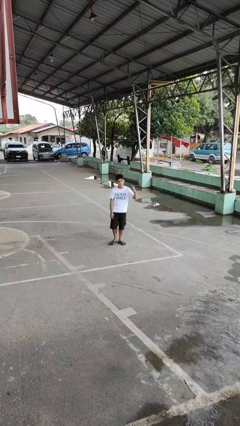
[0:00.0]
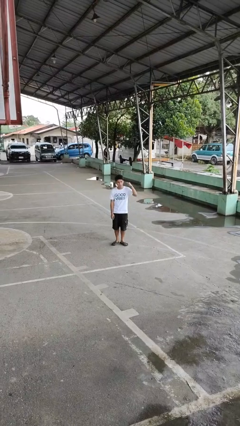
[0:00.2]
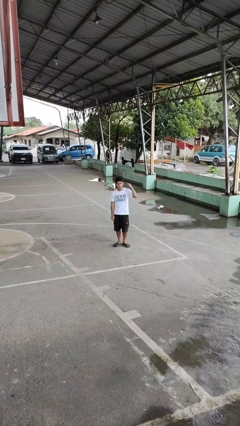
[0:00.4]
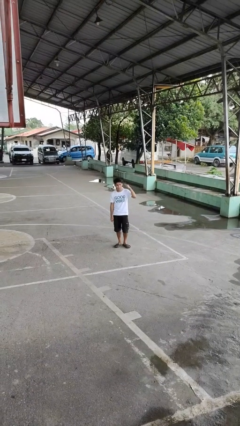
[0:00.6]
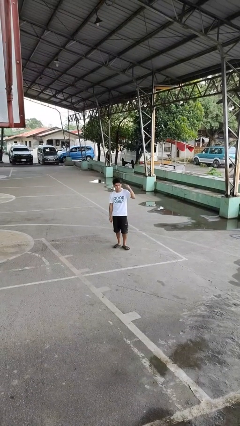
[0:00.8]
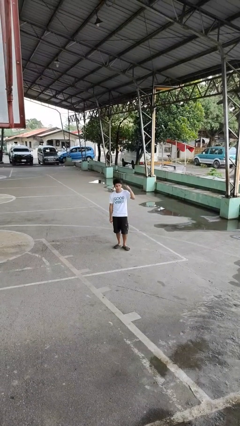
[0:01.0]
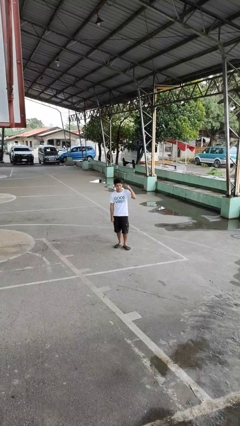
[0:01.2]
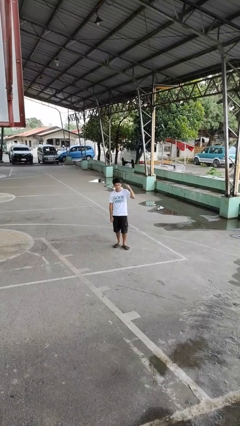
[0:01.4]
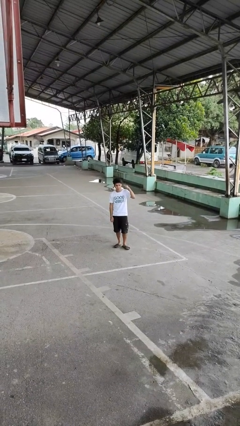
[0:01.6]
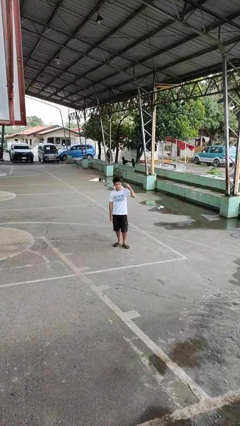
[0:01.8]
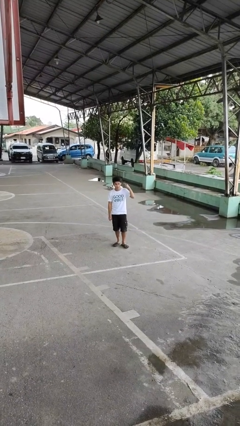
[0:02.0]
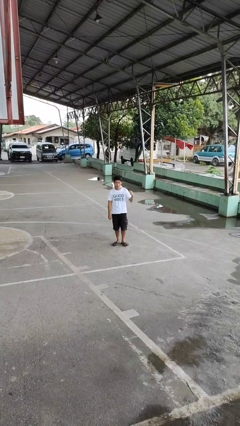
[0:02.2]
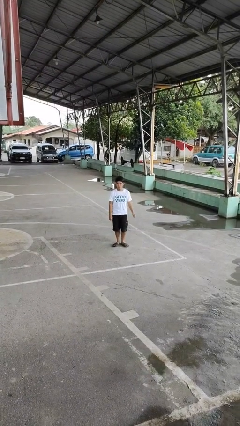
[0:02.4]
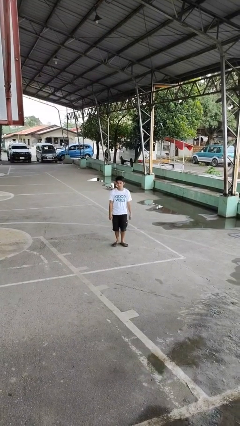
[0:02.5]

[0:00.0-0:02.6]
person gestures listen closely

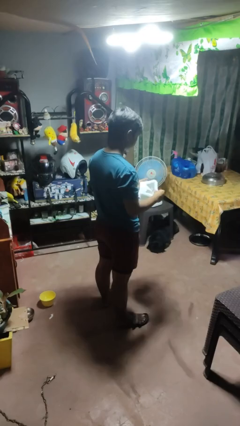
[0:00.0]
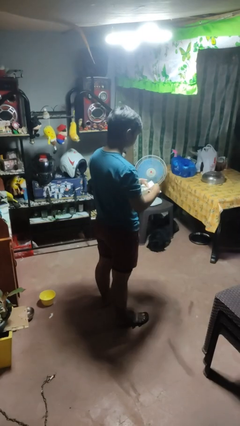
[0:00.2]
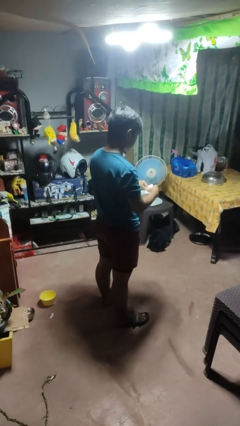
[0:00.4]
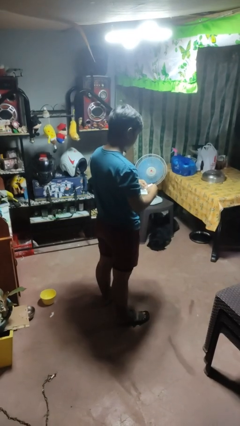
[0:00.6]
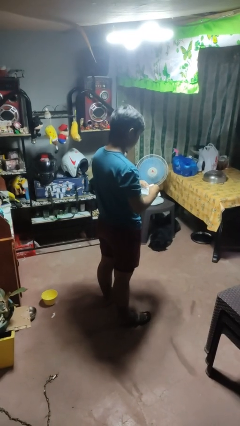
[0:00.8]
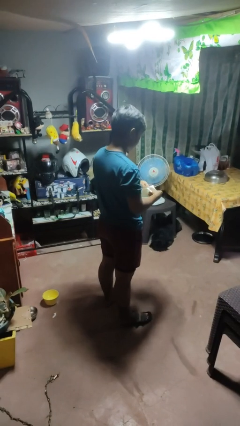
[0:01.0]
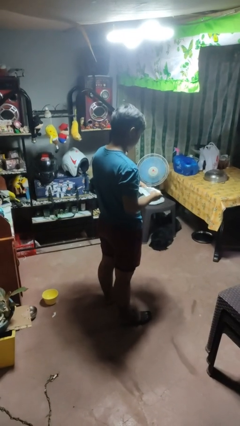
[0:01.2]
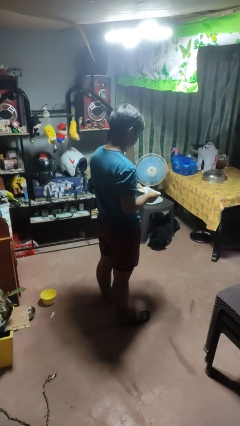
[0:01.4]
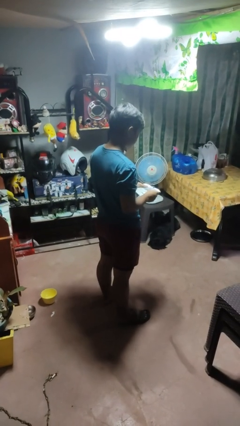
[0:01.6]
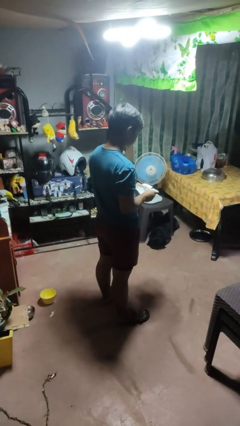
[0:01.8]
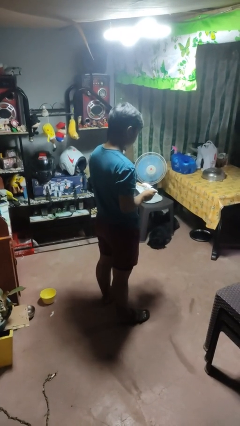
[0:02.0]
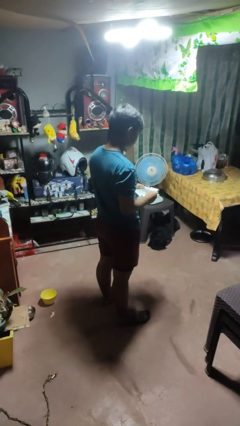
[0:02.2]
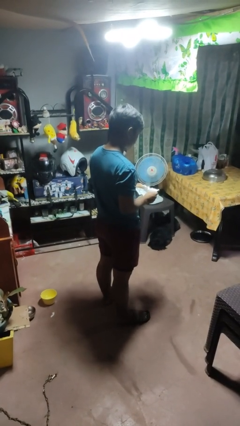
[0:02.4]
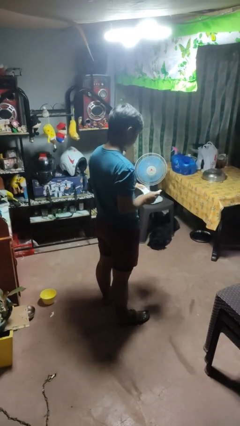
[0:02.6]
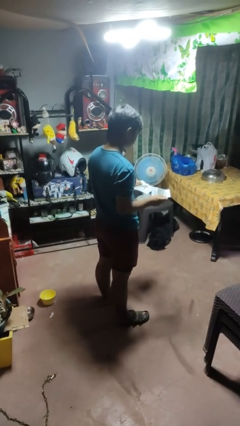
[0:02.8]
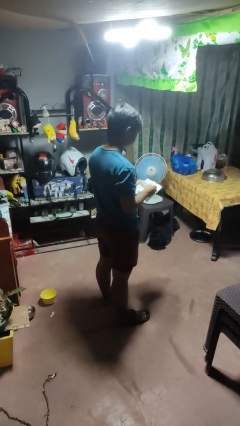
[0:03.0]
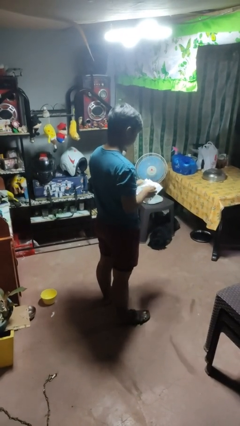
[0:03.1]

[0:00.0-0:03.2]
person tears paper

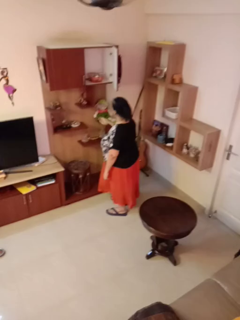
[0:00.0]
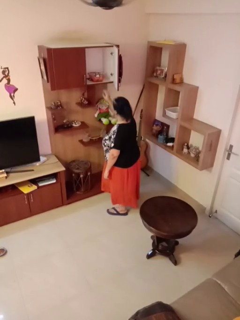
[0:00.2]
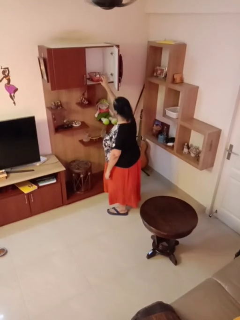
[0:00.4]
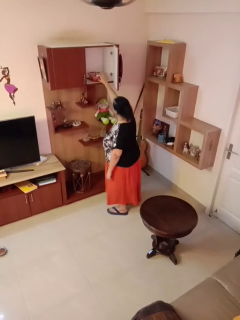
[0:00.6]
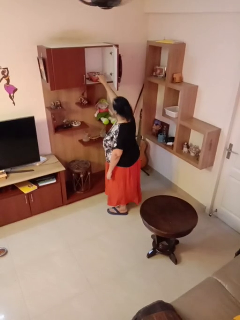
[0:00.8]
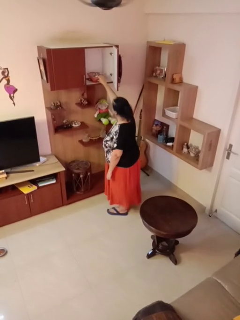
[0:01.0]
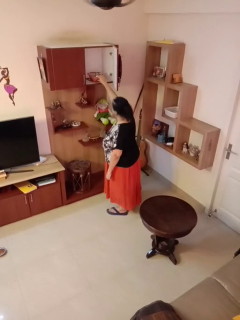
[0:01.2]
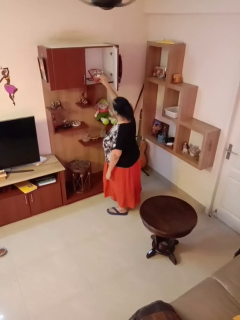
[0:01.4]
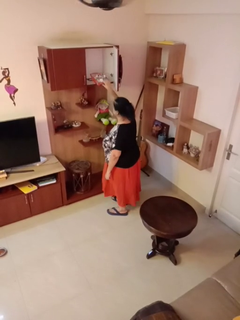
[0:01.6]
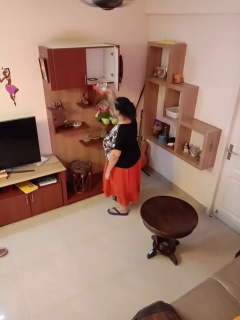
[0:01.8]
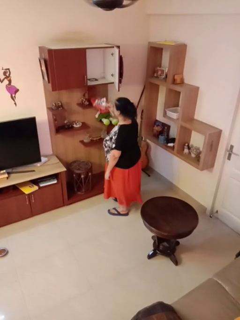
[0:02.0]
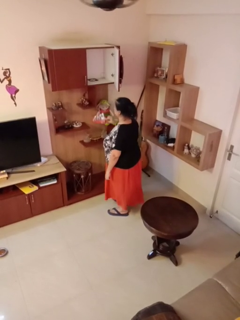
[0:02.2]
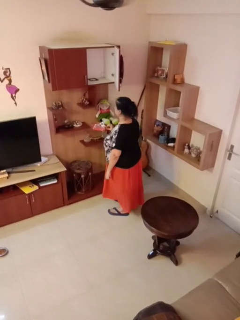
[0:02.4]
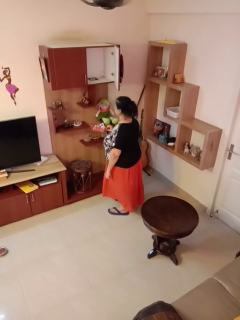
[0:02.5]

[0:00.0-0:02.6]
person picks up object from cabinet

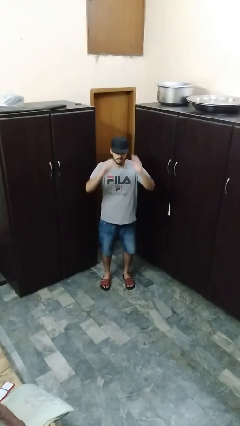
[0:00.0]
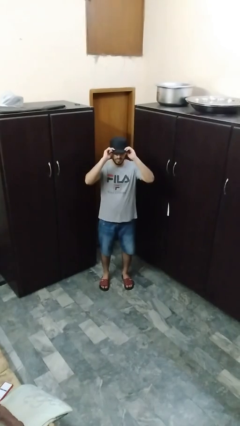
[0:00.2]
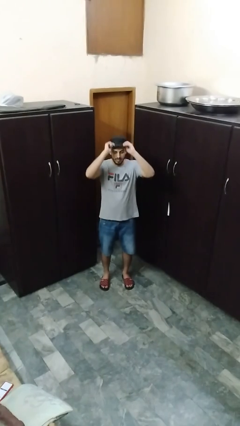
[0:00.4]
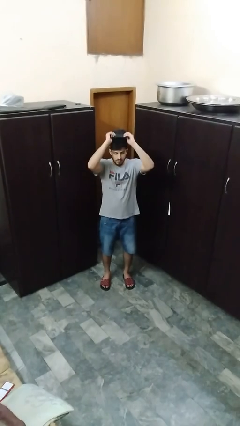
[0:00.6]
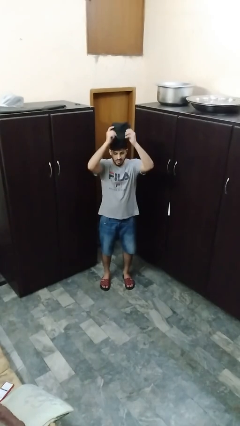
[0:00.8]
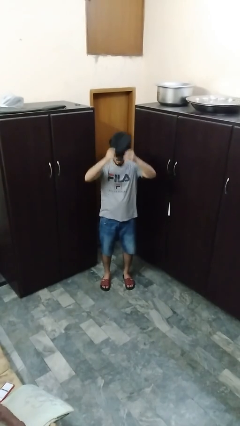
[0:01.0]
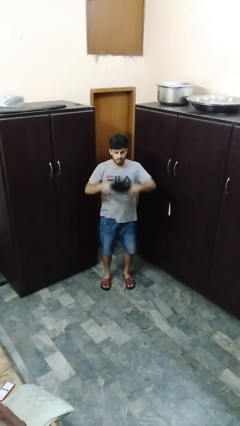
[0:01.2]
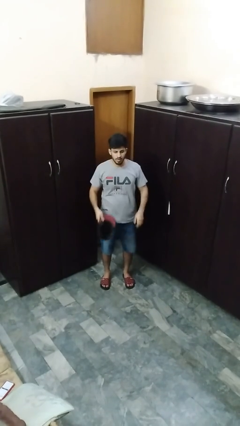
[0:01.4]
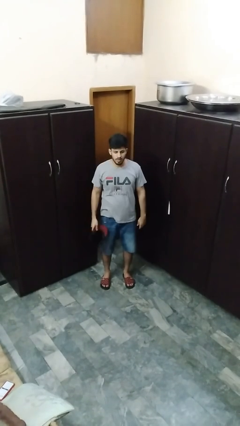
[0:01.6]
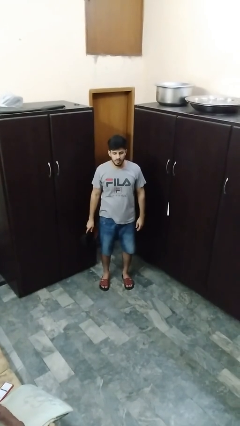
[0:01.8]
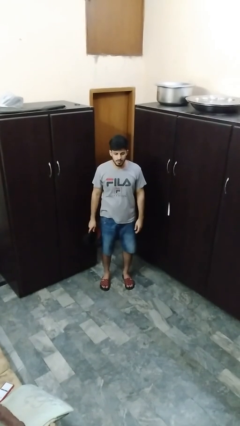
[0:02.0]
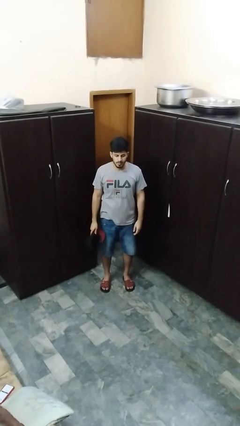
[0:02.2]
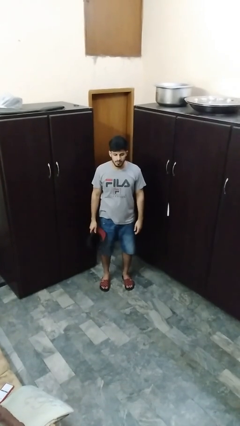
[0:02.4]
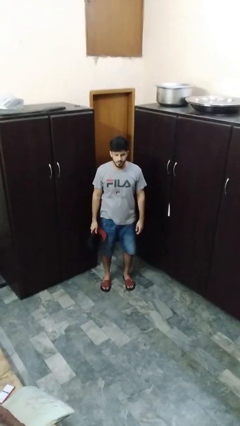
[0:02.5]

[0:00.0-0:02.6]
person takes off hat

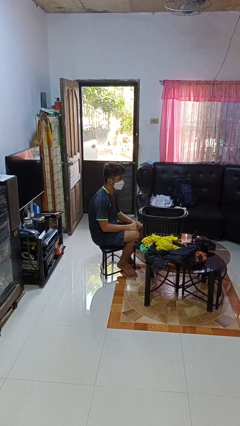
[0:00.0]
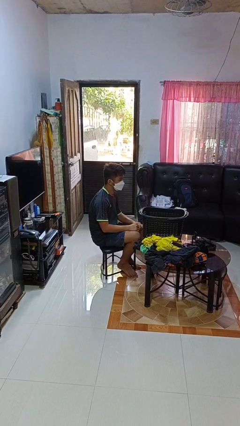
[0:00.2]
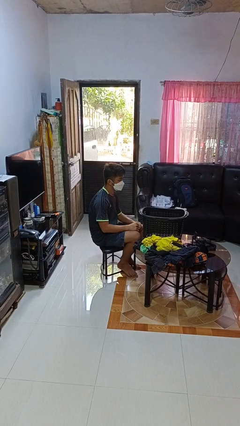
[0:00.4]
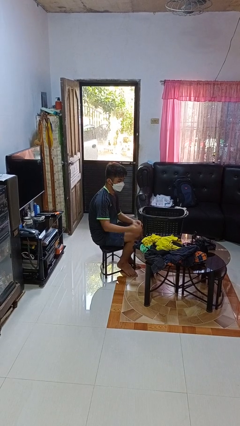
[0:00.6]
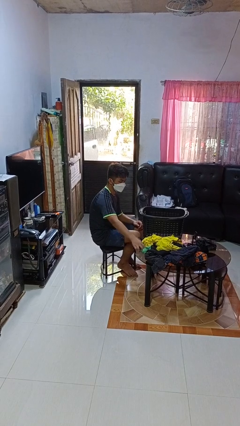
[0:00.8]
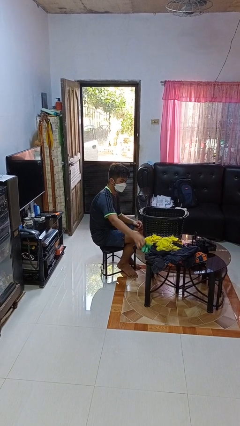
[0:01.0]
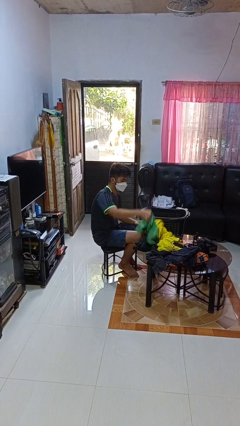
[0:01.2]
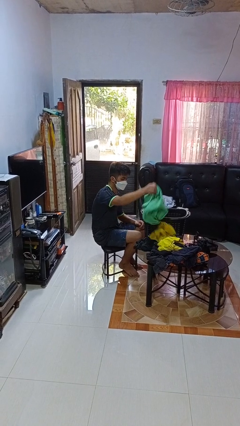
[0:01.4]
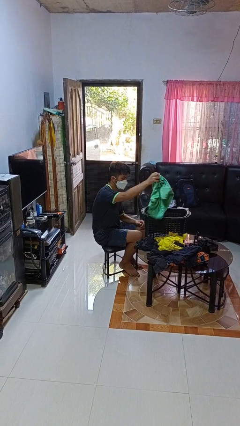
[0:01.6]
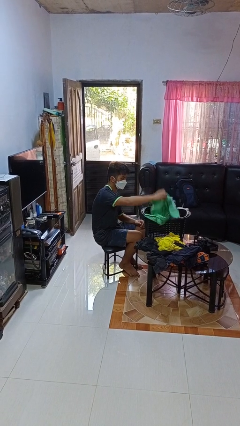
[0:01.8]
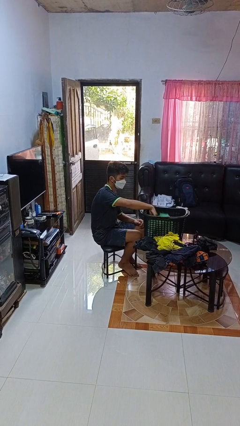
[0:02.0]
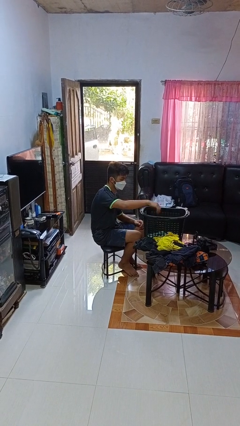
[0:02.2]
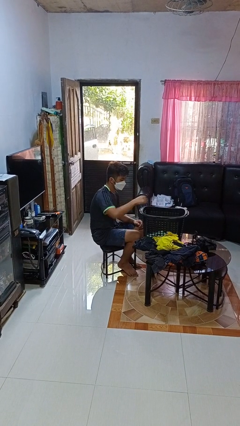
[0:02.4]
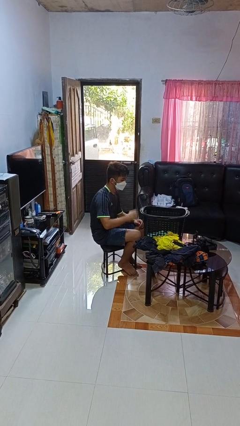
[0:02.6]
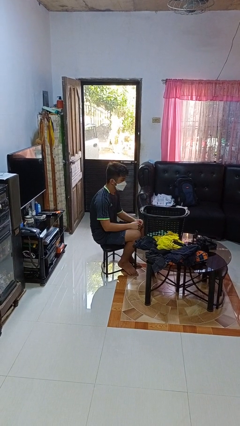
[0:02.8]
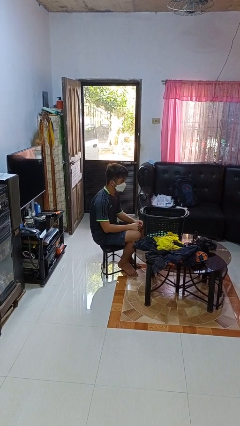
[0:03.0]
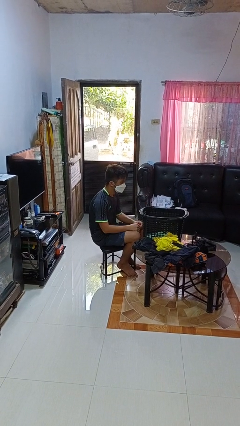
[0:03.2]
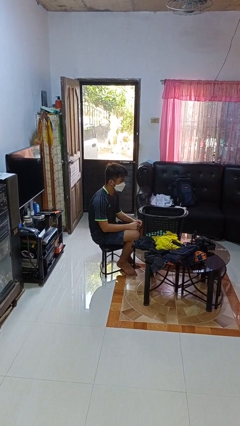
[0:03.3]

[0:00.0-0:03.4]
person puts object into basket

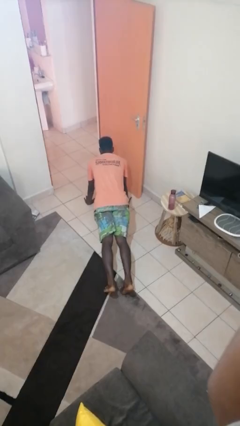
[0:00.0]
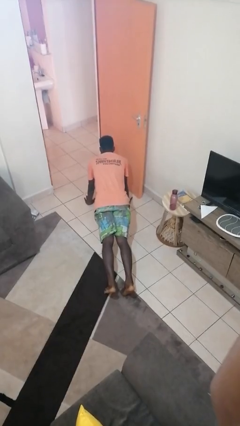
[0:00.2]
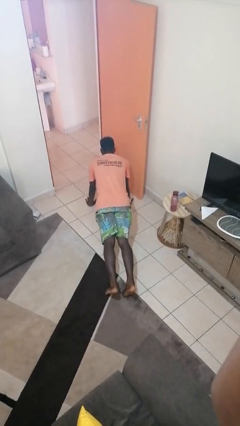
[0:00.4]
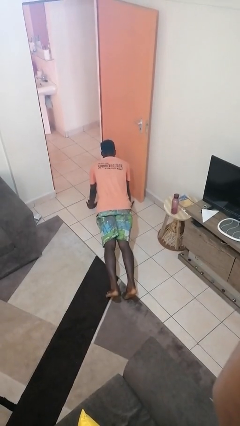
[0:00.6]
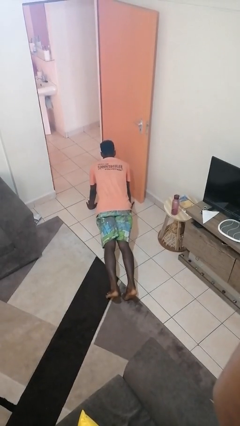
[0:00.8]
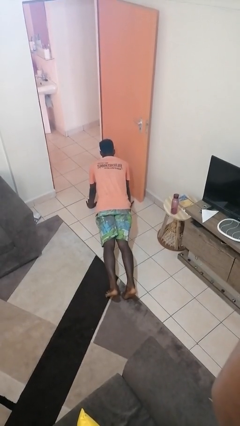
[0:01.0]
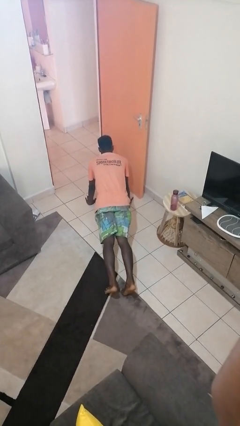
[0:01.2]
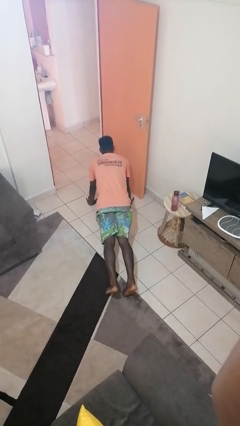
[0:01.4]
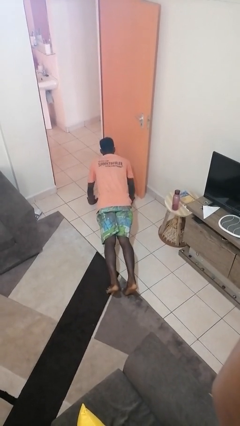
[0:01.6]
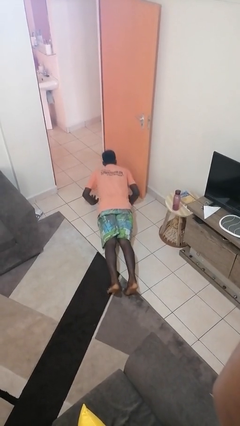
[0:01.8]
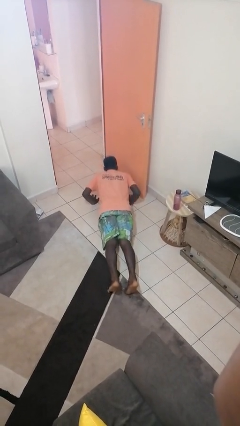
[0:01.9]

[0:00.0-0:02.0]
person exercises with pushup

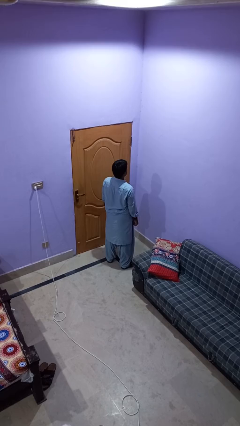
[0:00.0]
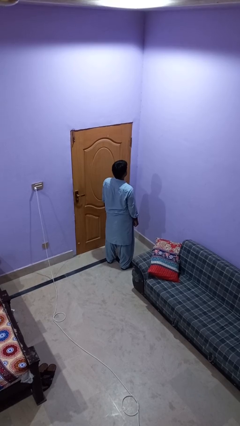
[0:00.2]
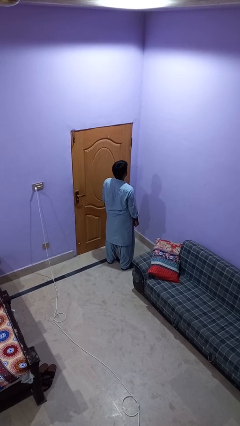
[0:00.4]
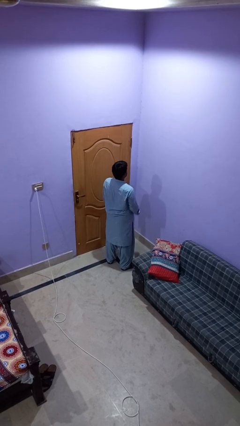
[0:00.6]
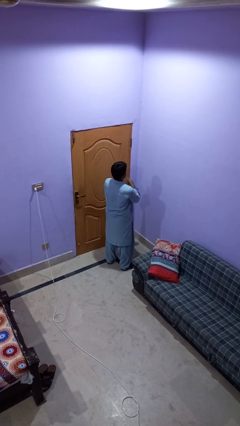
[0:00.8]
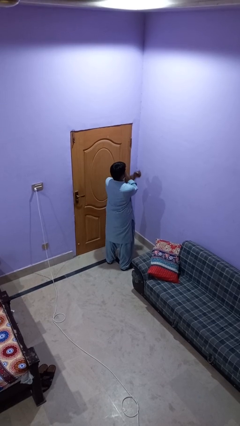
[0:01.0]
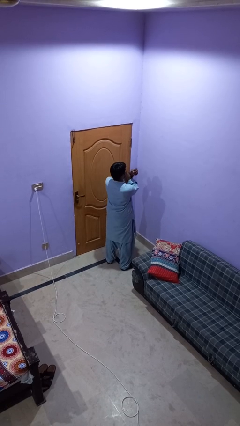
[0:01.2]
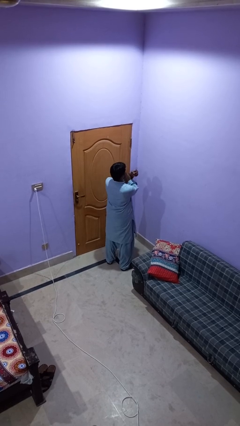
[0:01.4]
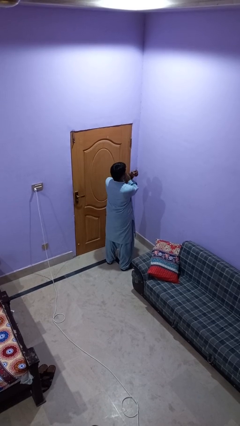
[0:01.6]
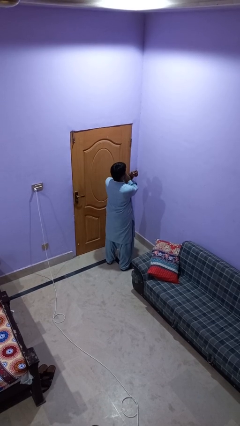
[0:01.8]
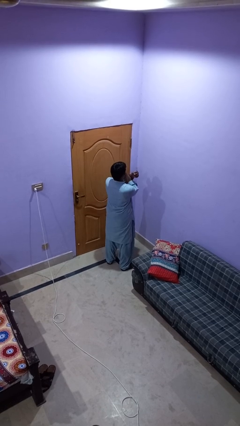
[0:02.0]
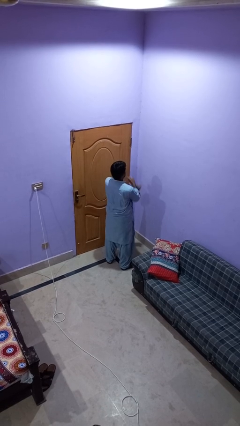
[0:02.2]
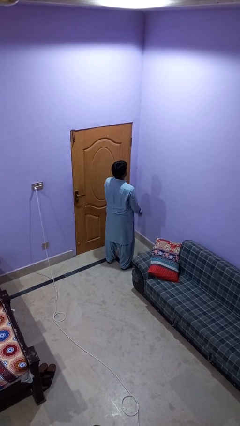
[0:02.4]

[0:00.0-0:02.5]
person gestures arms x
